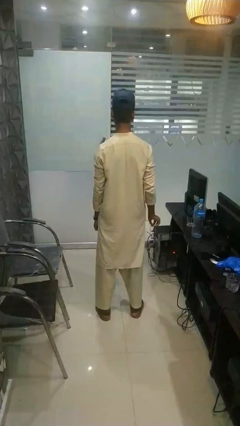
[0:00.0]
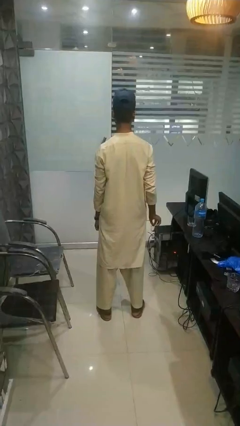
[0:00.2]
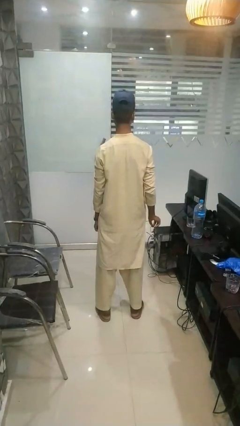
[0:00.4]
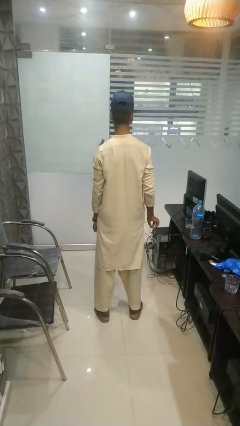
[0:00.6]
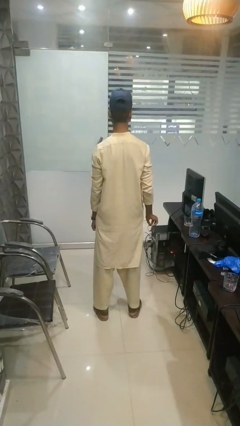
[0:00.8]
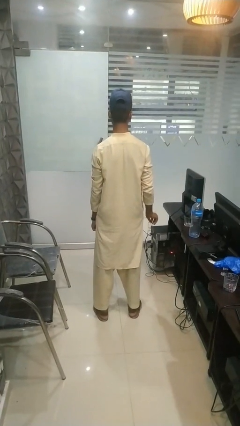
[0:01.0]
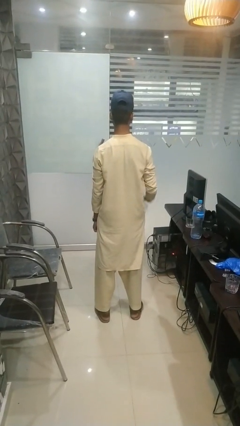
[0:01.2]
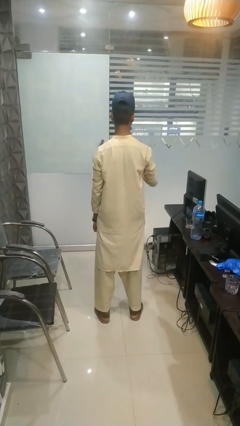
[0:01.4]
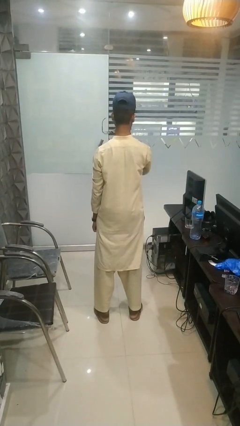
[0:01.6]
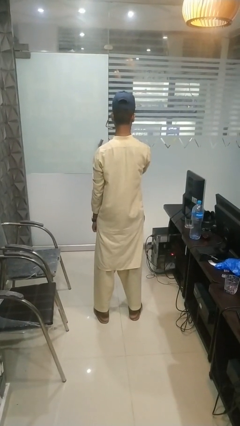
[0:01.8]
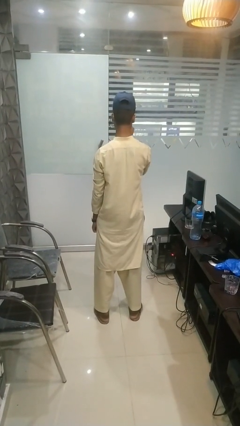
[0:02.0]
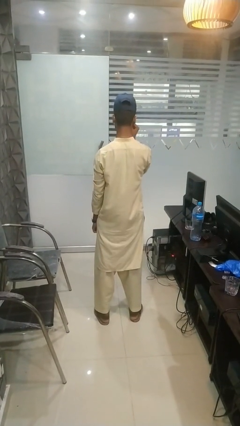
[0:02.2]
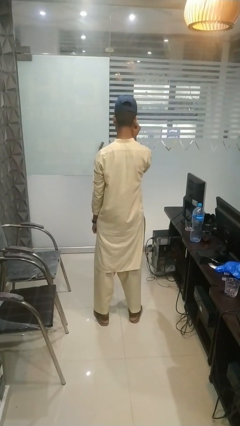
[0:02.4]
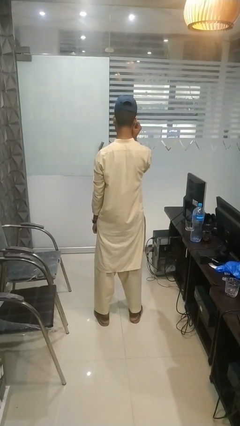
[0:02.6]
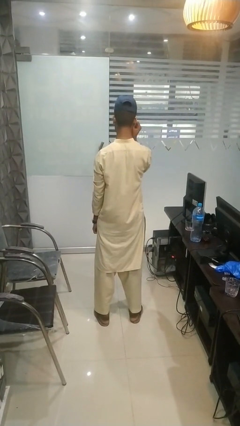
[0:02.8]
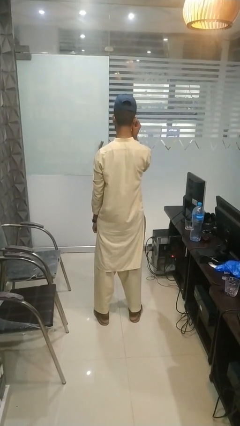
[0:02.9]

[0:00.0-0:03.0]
person puts on glasses

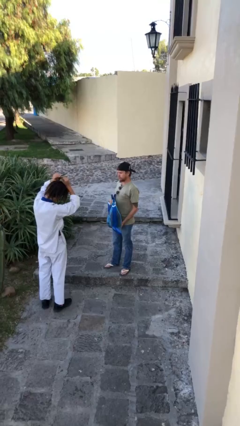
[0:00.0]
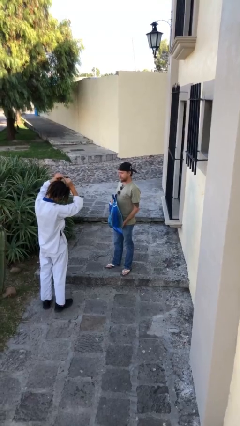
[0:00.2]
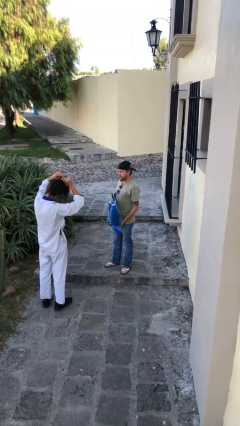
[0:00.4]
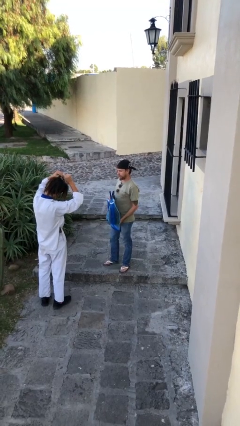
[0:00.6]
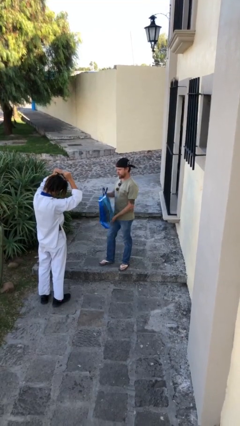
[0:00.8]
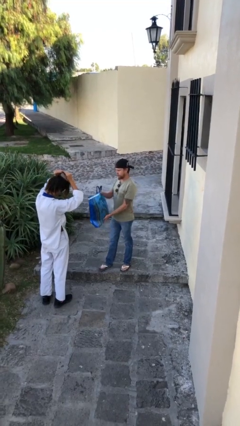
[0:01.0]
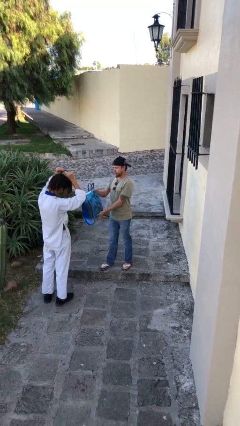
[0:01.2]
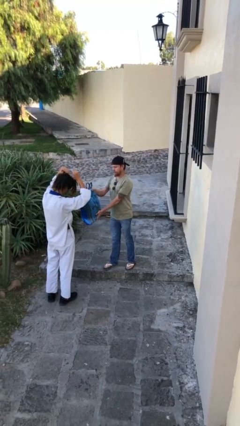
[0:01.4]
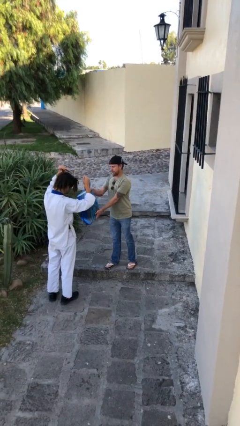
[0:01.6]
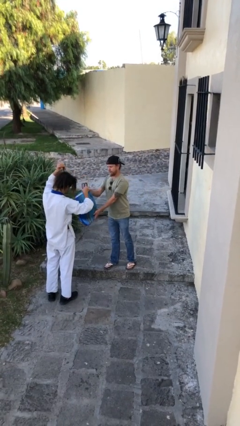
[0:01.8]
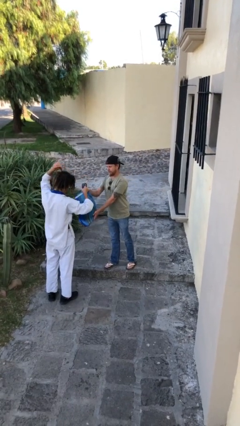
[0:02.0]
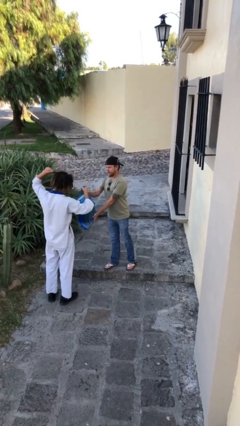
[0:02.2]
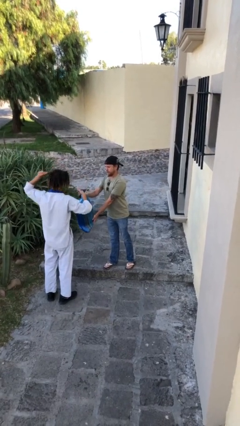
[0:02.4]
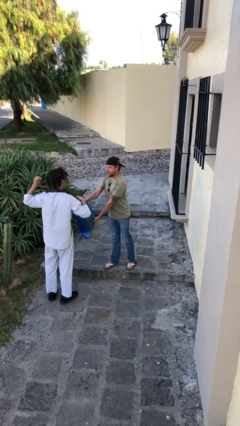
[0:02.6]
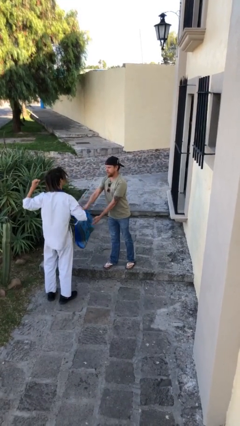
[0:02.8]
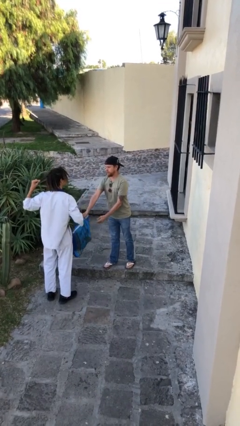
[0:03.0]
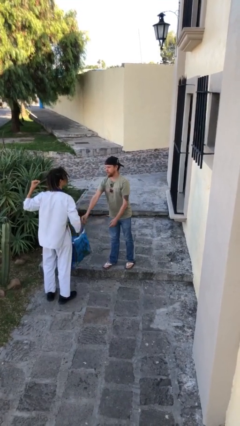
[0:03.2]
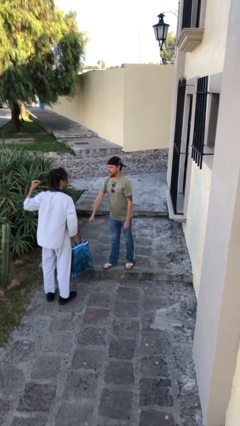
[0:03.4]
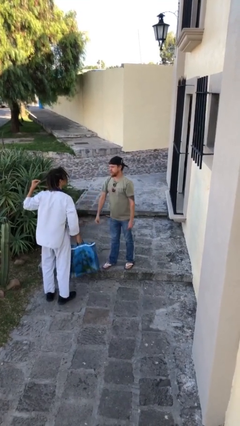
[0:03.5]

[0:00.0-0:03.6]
person transfers object to person

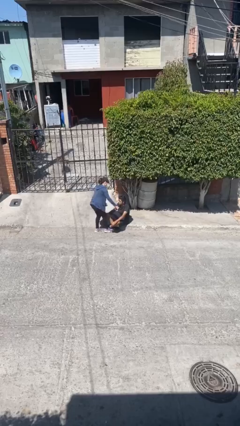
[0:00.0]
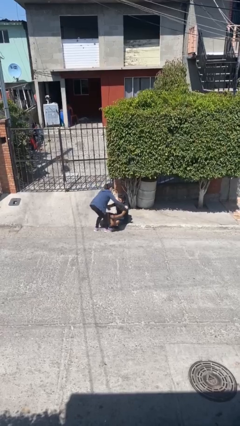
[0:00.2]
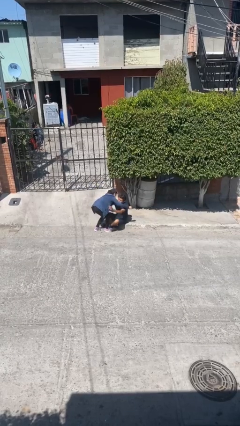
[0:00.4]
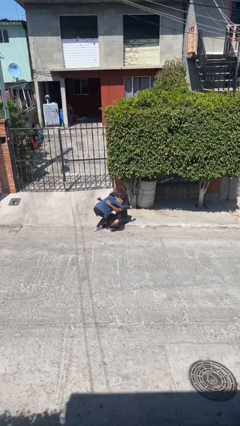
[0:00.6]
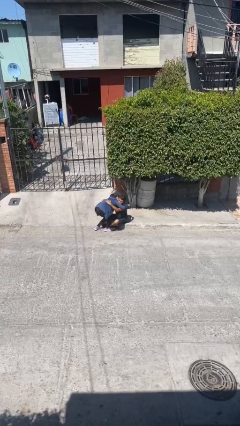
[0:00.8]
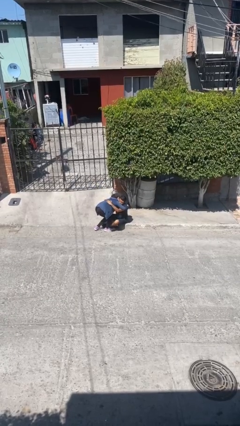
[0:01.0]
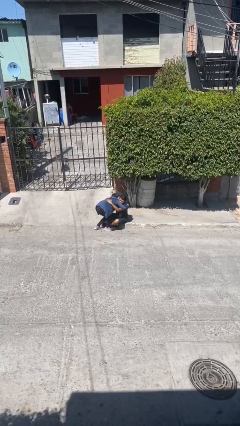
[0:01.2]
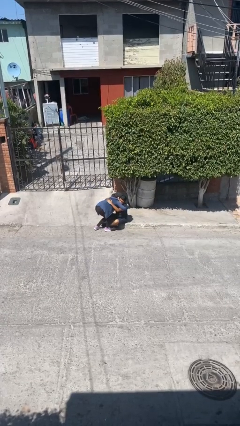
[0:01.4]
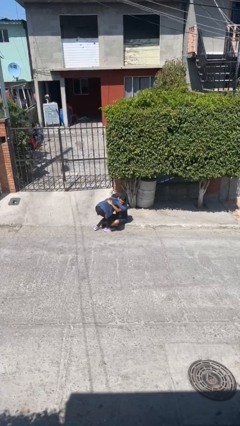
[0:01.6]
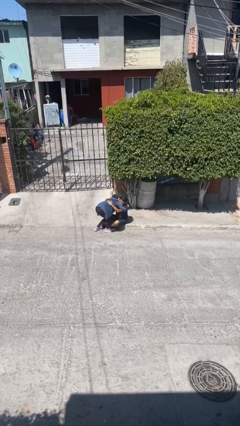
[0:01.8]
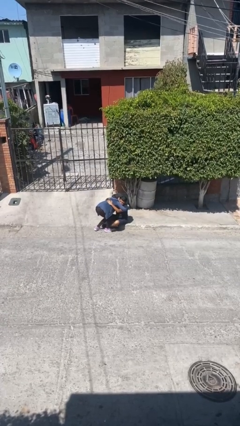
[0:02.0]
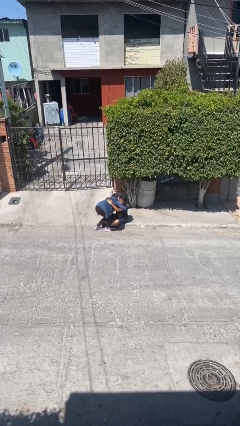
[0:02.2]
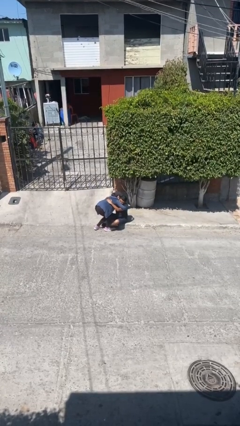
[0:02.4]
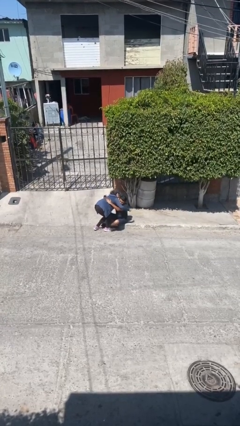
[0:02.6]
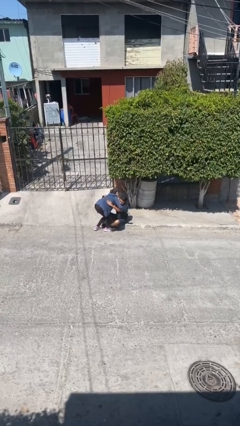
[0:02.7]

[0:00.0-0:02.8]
person embraces person

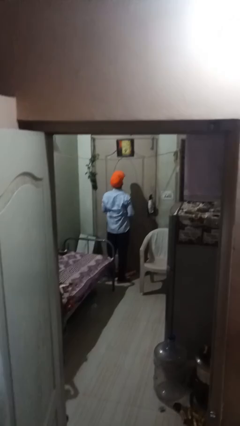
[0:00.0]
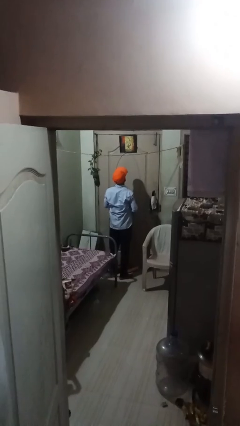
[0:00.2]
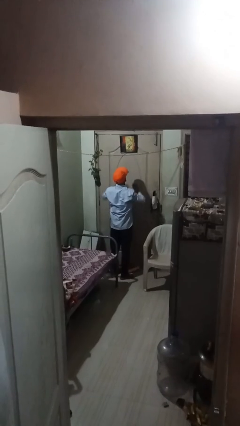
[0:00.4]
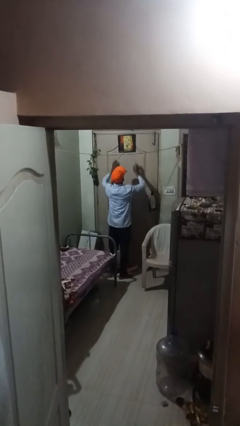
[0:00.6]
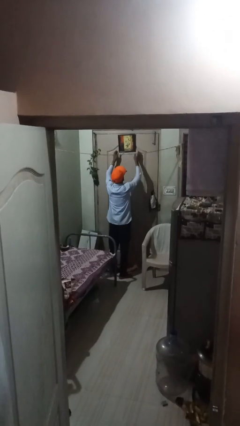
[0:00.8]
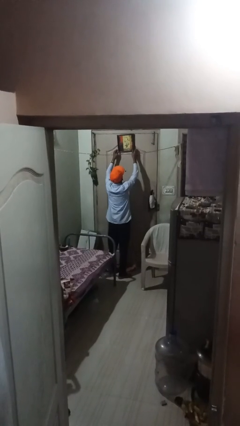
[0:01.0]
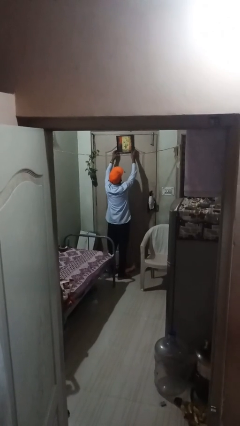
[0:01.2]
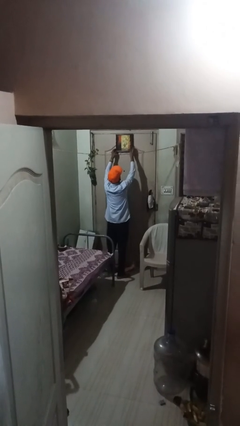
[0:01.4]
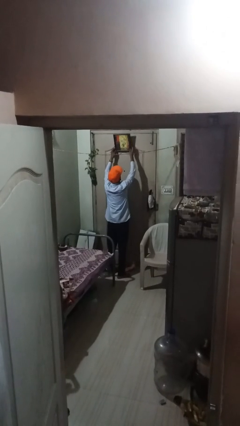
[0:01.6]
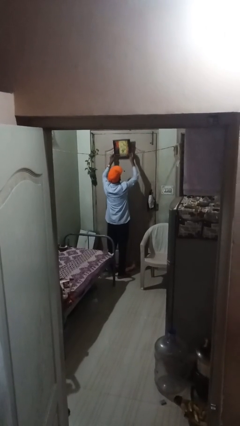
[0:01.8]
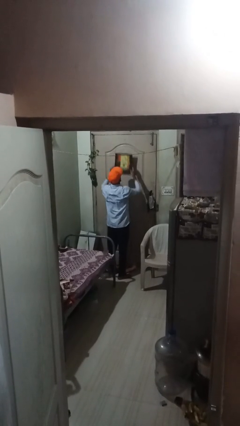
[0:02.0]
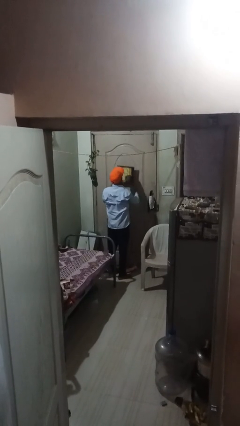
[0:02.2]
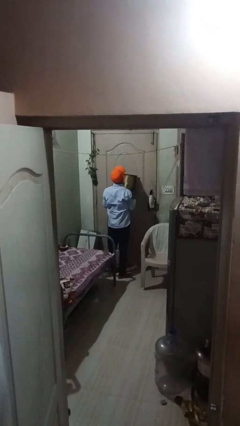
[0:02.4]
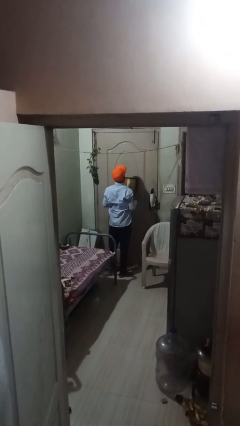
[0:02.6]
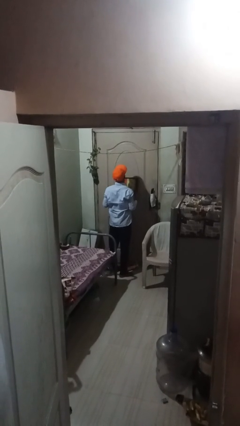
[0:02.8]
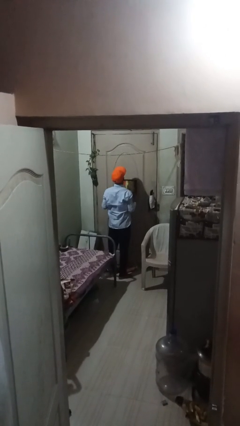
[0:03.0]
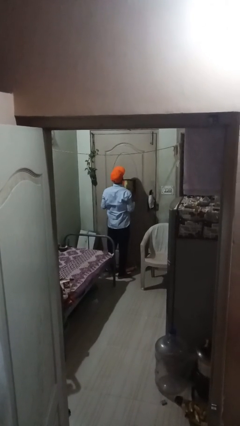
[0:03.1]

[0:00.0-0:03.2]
person takes down picture frame

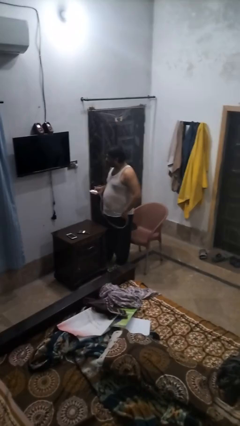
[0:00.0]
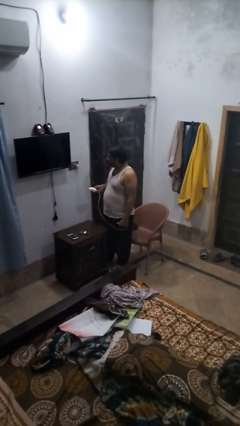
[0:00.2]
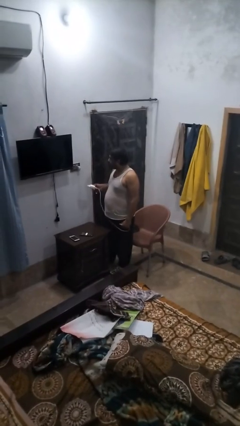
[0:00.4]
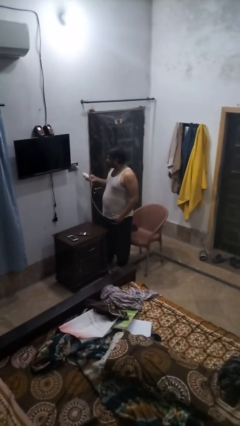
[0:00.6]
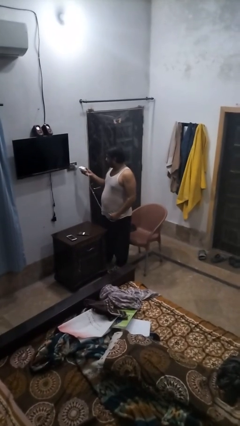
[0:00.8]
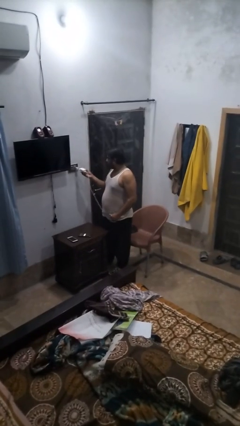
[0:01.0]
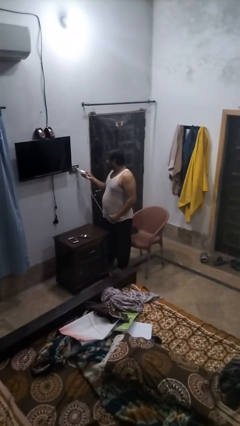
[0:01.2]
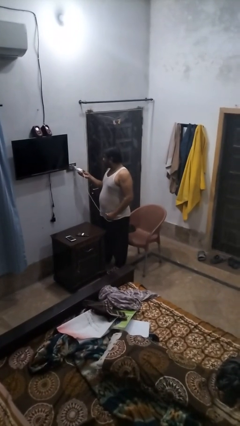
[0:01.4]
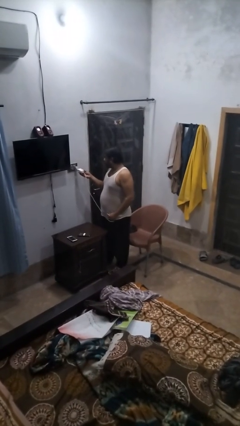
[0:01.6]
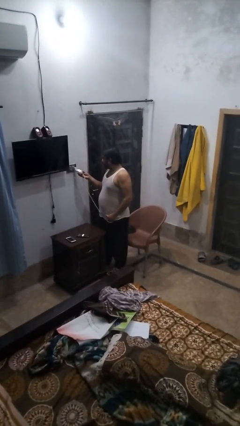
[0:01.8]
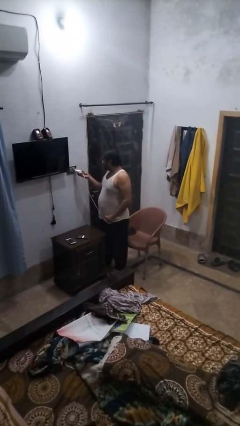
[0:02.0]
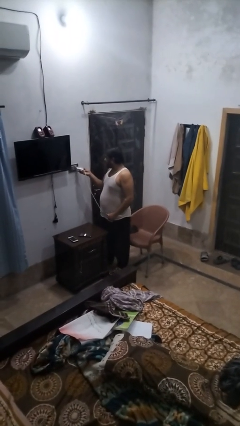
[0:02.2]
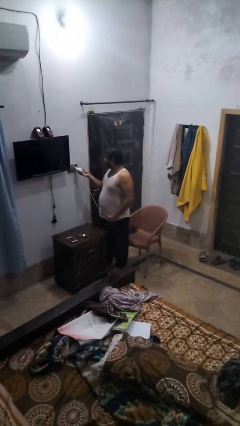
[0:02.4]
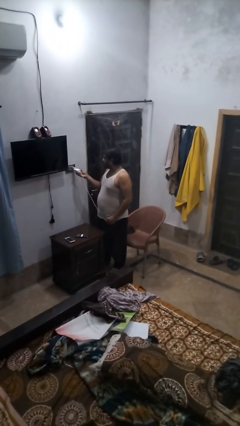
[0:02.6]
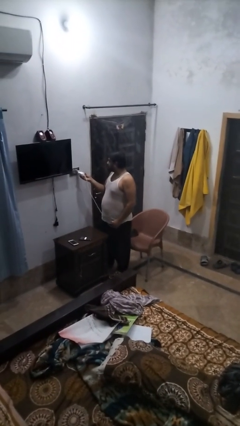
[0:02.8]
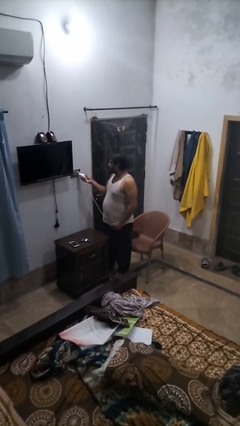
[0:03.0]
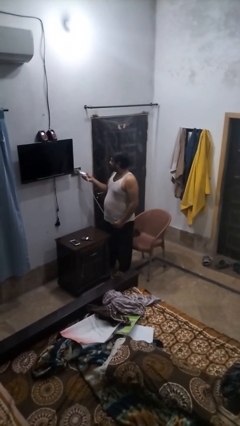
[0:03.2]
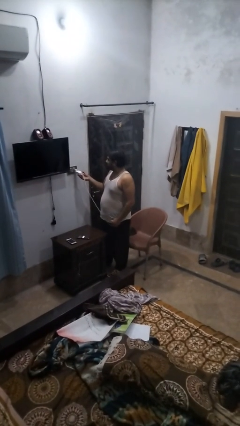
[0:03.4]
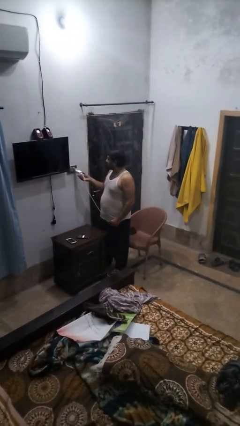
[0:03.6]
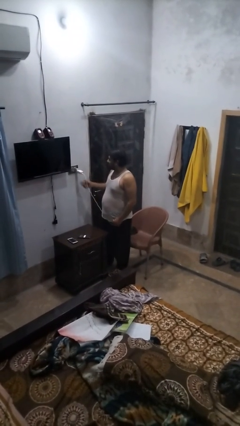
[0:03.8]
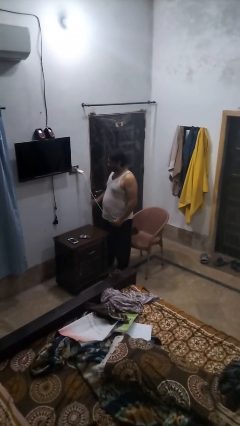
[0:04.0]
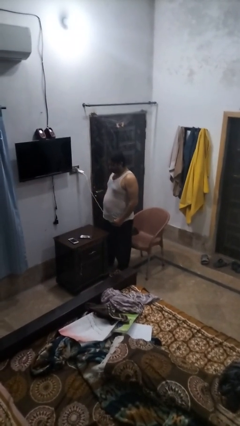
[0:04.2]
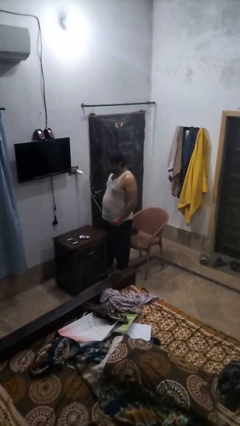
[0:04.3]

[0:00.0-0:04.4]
person plugs into electrical socket
